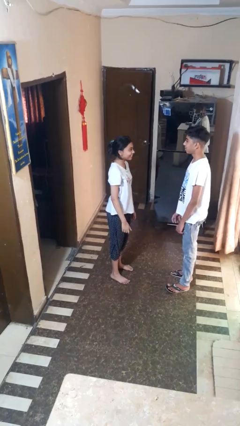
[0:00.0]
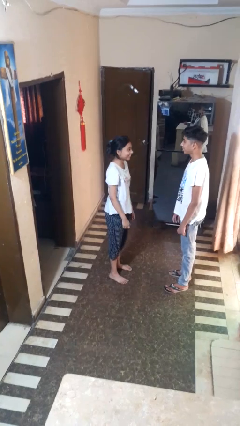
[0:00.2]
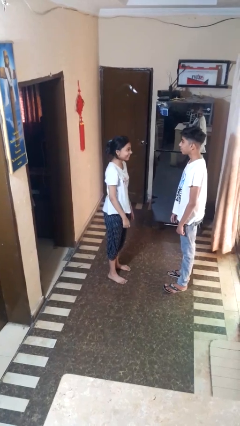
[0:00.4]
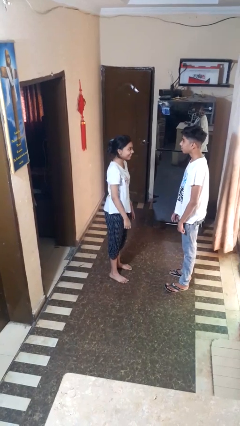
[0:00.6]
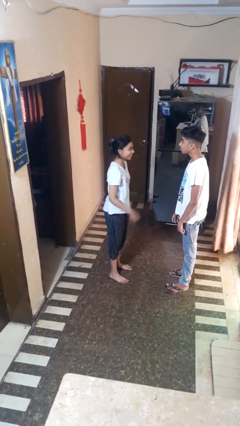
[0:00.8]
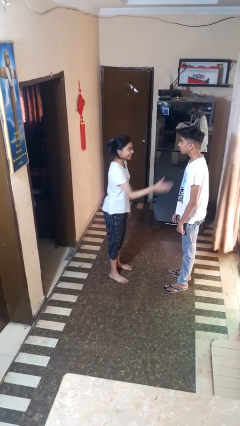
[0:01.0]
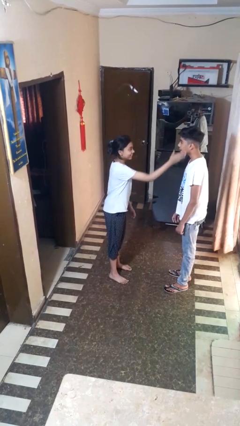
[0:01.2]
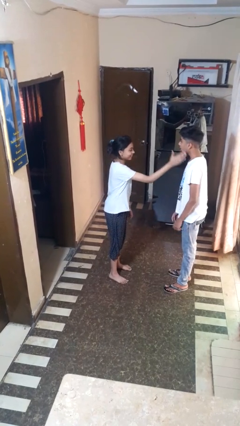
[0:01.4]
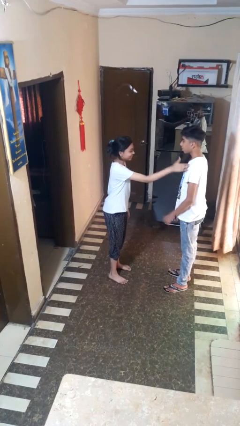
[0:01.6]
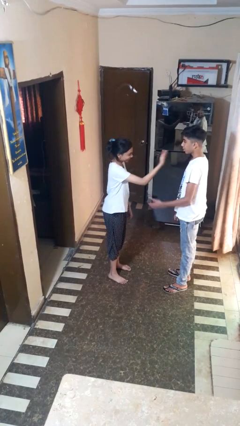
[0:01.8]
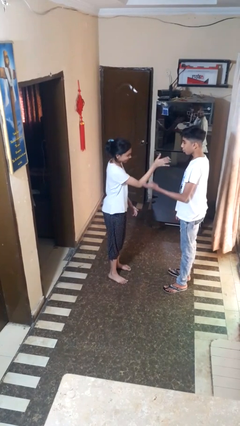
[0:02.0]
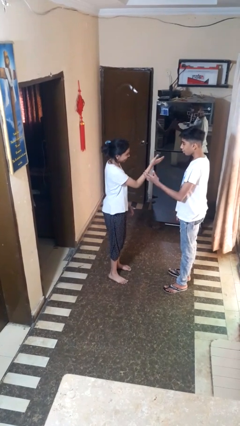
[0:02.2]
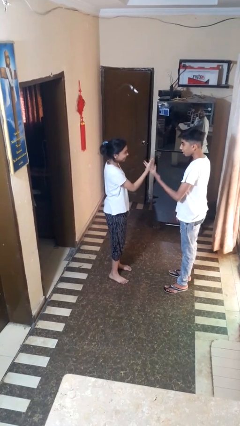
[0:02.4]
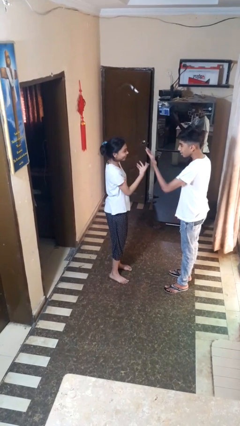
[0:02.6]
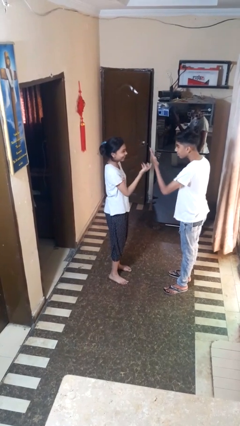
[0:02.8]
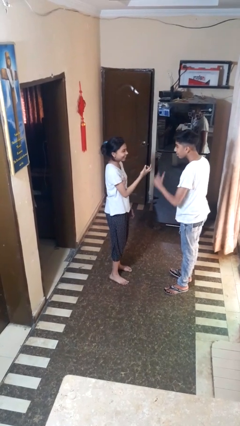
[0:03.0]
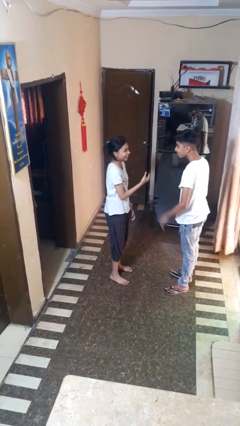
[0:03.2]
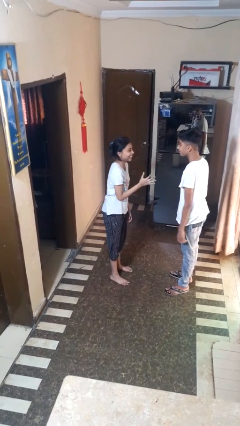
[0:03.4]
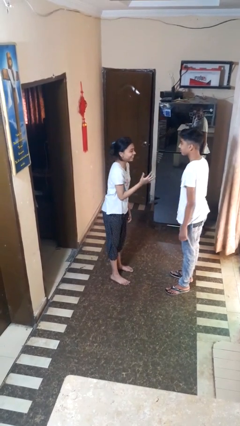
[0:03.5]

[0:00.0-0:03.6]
person shoves person

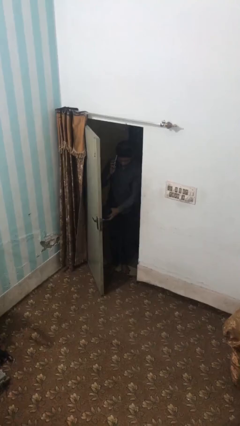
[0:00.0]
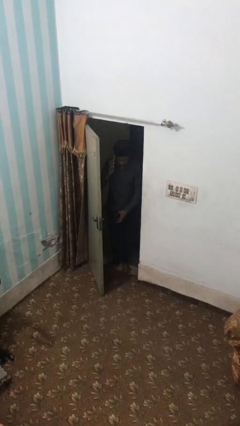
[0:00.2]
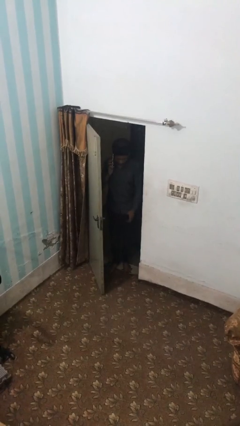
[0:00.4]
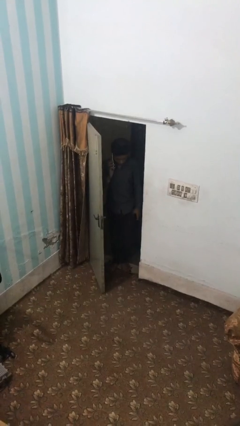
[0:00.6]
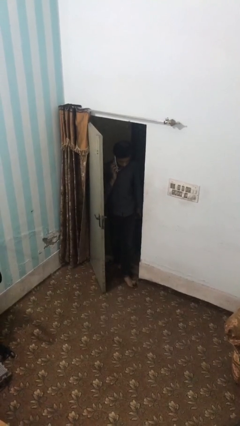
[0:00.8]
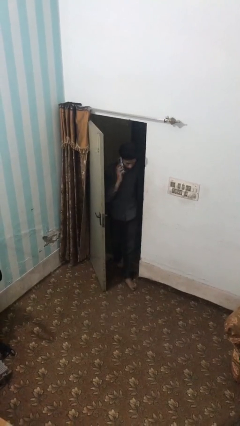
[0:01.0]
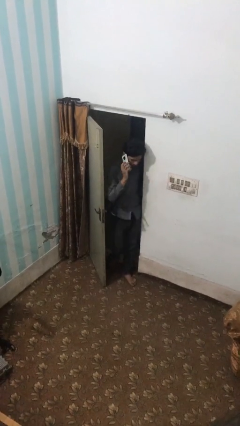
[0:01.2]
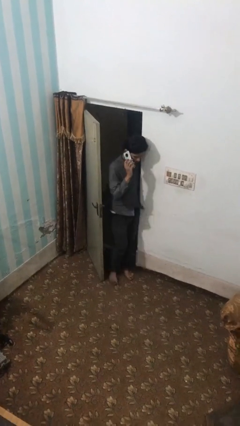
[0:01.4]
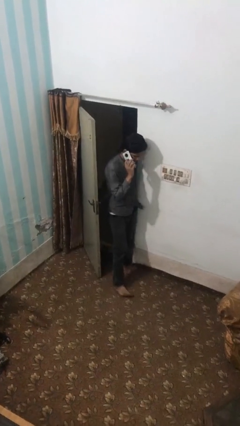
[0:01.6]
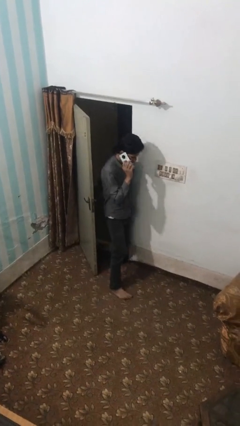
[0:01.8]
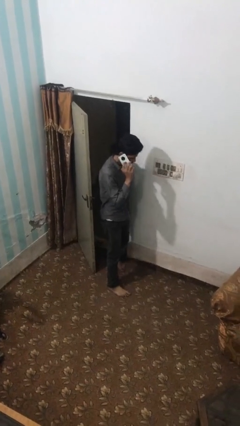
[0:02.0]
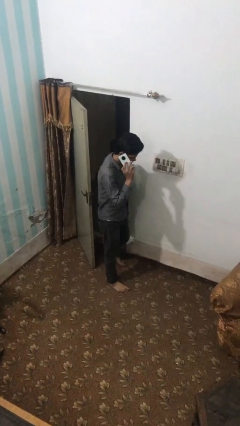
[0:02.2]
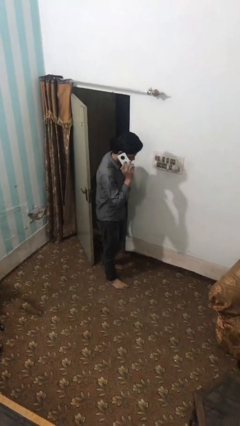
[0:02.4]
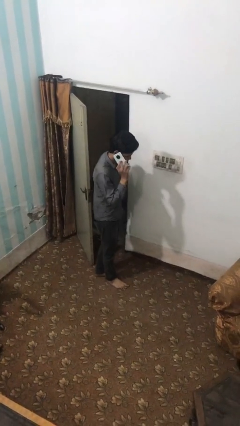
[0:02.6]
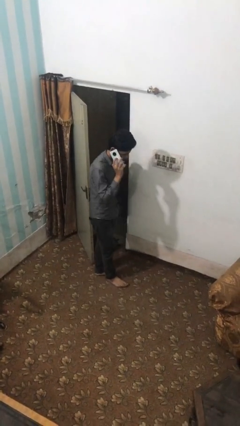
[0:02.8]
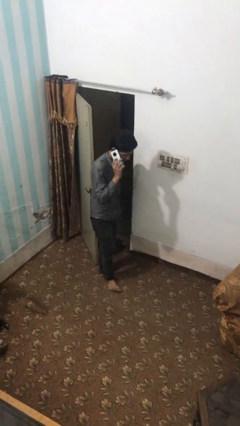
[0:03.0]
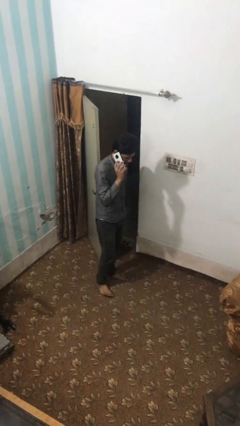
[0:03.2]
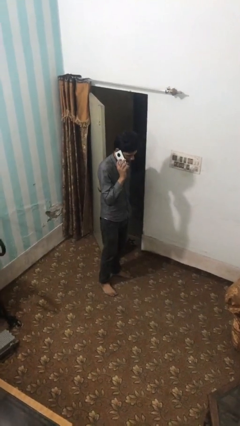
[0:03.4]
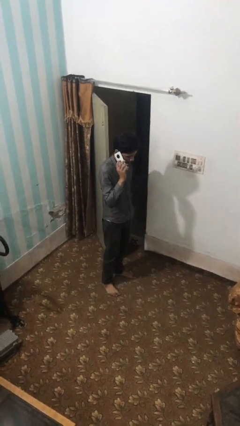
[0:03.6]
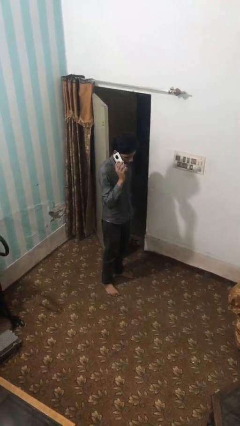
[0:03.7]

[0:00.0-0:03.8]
person enters scene through structure

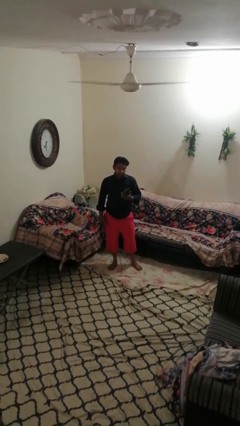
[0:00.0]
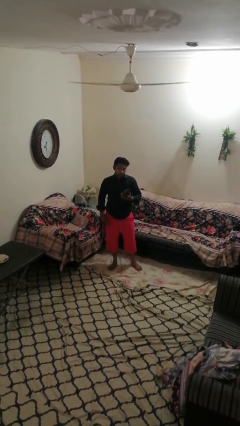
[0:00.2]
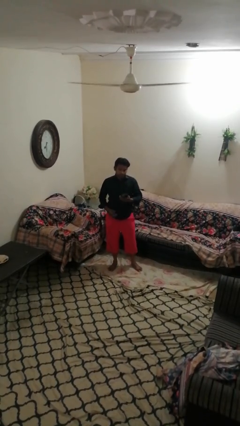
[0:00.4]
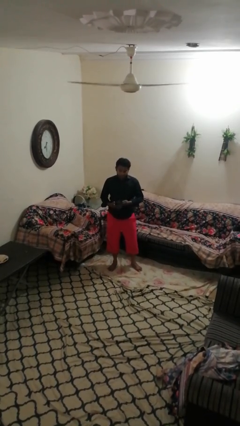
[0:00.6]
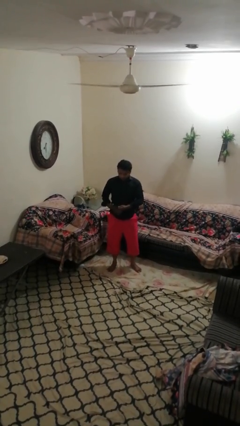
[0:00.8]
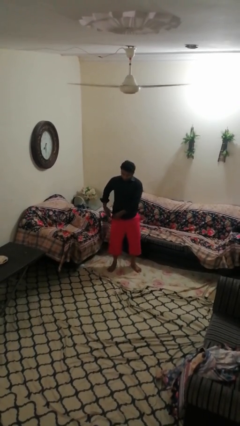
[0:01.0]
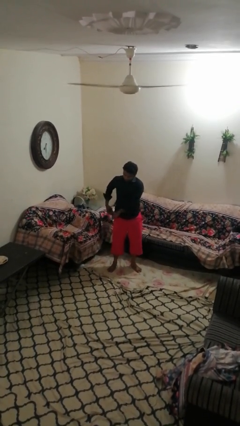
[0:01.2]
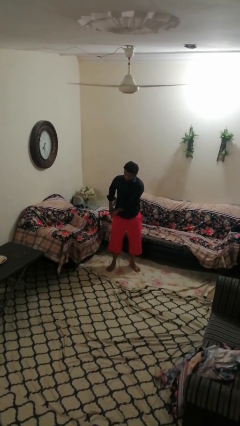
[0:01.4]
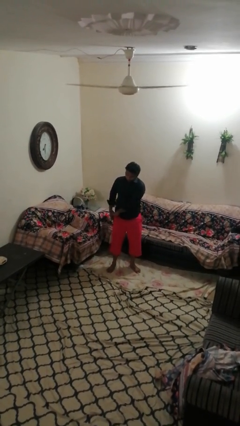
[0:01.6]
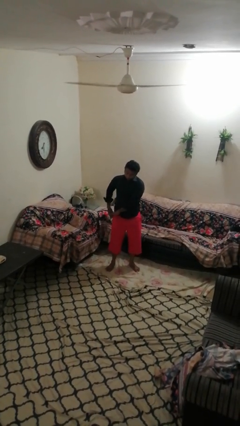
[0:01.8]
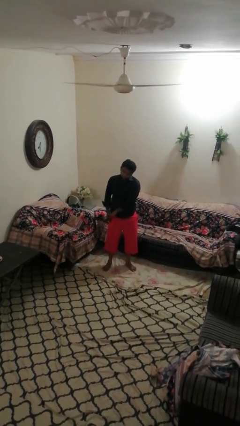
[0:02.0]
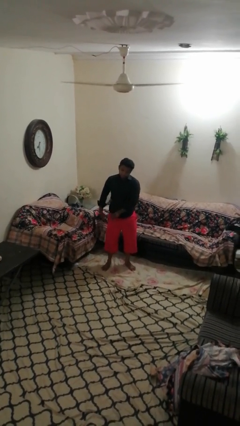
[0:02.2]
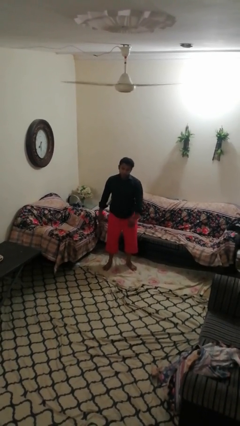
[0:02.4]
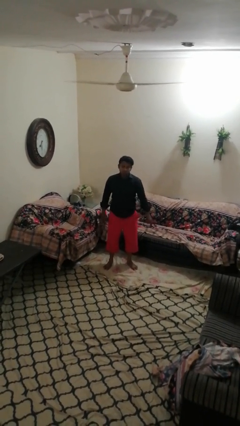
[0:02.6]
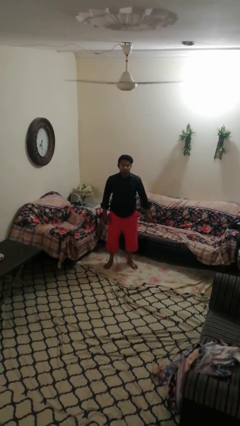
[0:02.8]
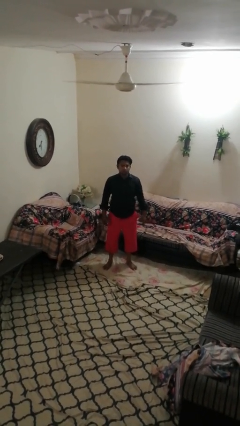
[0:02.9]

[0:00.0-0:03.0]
person puts phone into pocket

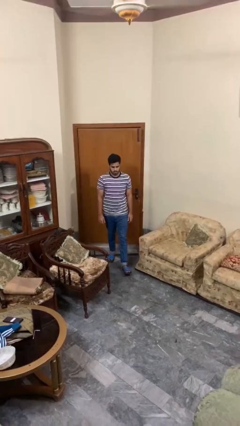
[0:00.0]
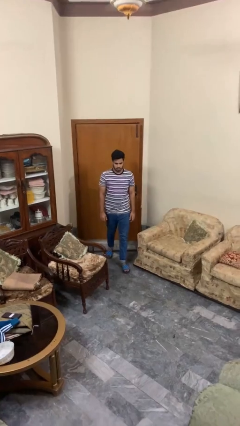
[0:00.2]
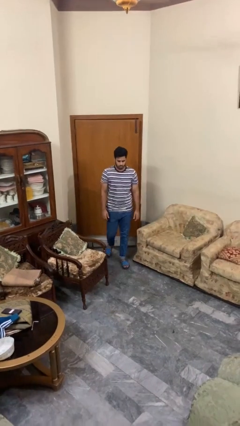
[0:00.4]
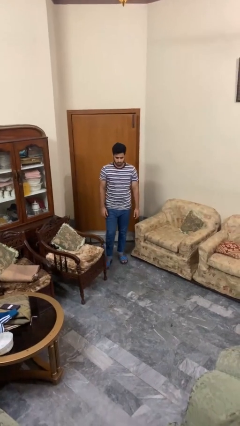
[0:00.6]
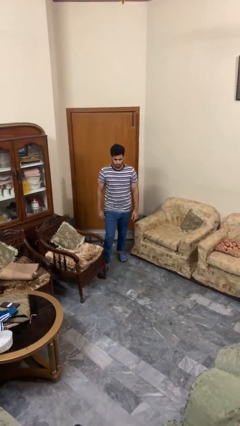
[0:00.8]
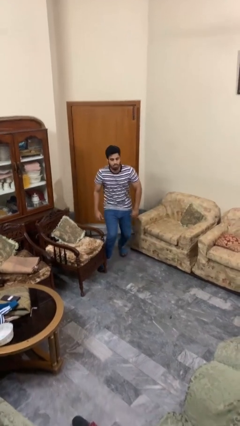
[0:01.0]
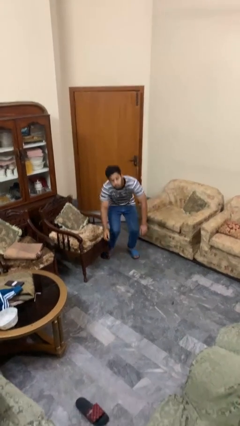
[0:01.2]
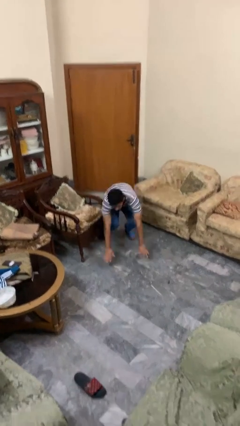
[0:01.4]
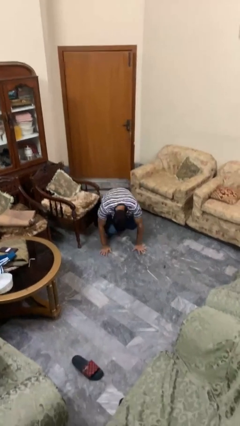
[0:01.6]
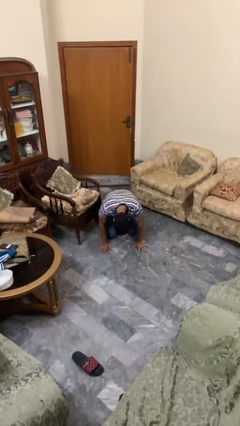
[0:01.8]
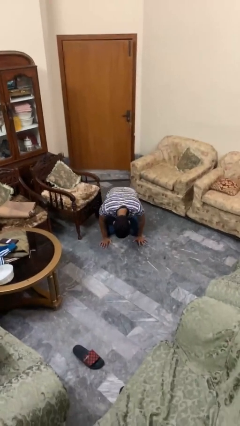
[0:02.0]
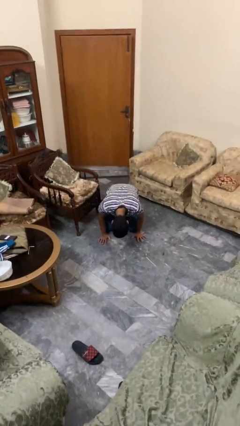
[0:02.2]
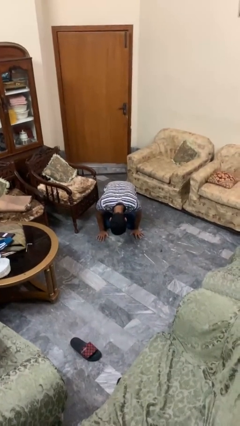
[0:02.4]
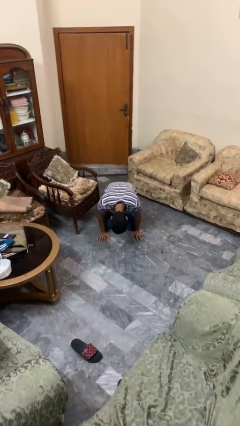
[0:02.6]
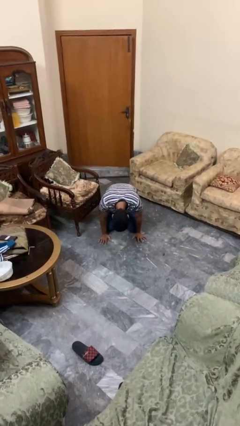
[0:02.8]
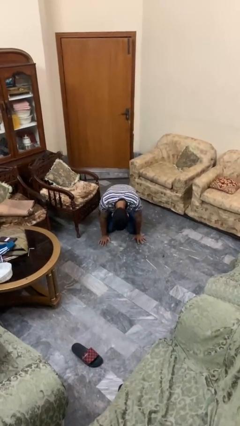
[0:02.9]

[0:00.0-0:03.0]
person trips on object on floor

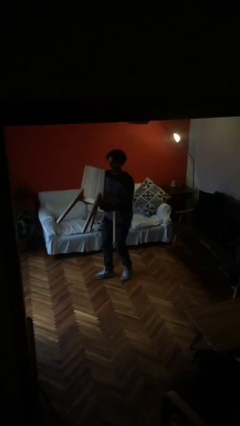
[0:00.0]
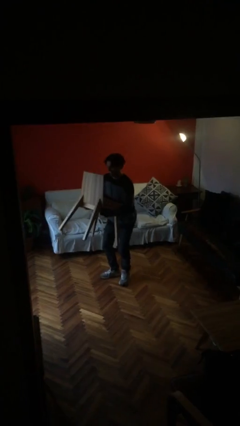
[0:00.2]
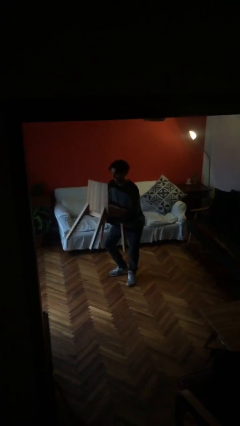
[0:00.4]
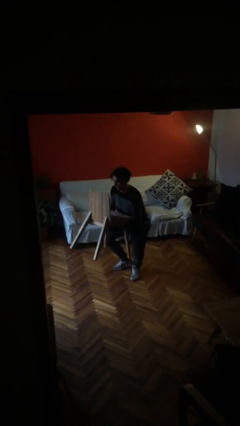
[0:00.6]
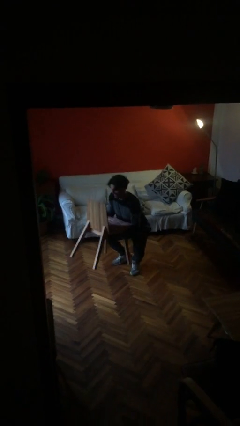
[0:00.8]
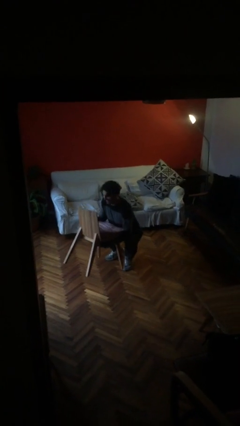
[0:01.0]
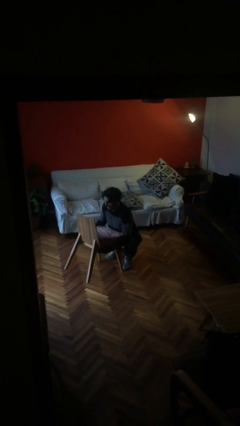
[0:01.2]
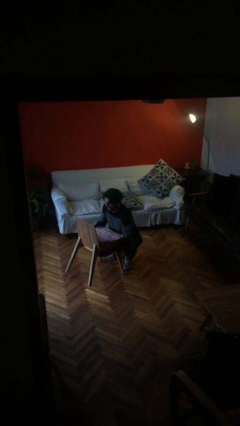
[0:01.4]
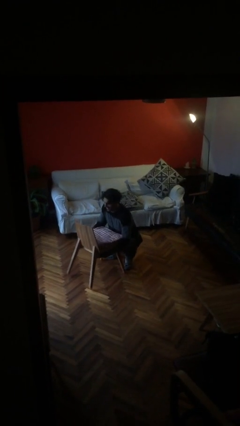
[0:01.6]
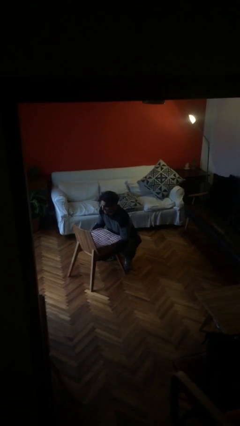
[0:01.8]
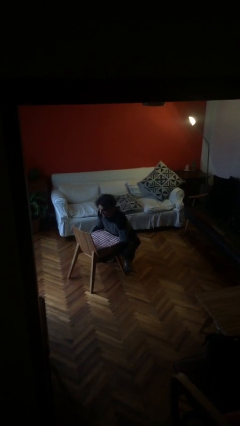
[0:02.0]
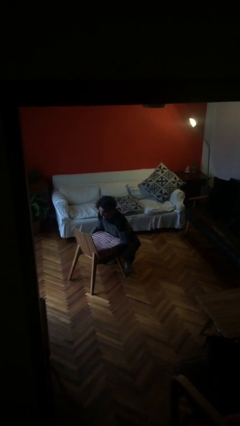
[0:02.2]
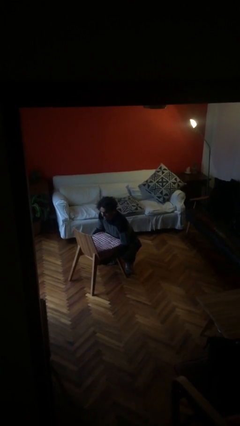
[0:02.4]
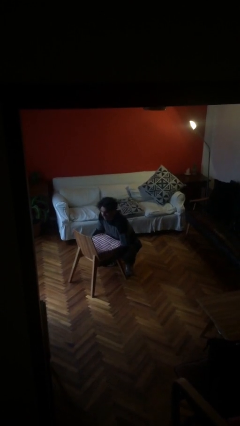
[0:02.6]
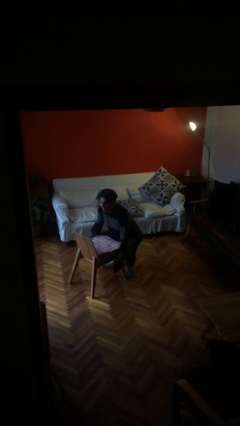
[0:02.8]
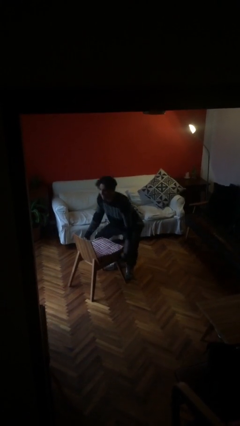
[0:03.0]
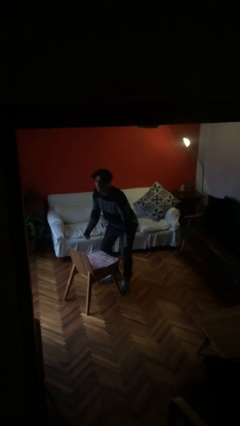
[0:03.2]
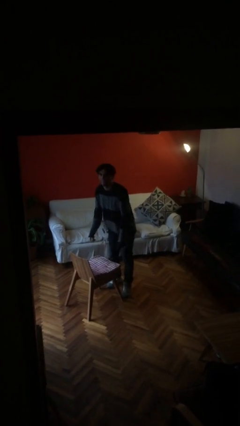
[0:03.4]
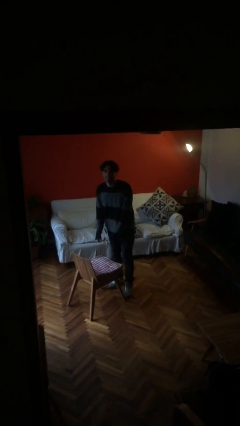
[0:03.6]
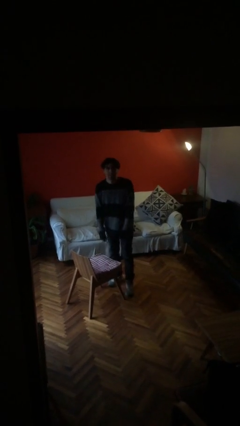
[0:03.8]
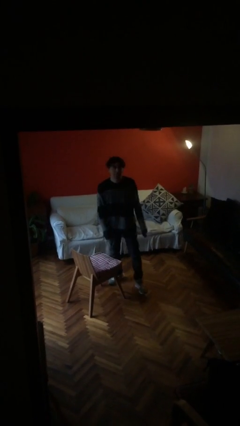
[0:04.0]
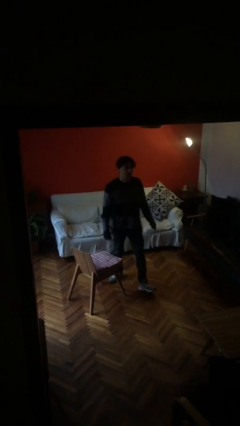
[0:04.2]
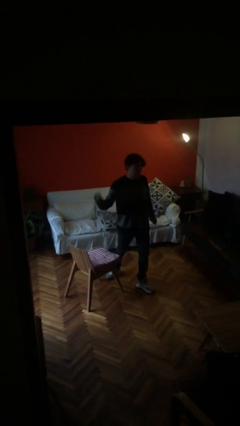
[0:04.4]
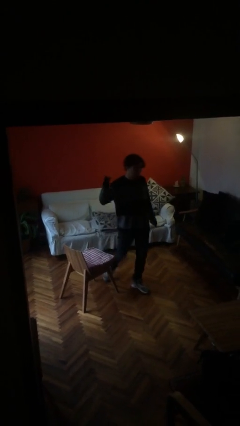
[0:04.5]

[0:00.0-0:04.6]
person puts down object on floor

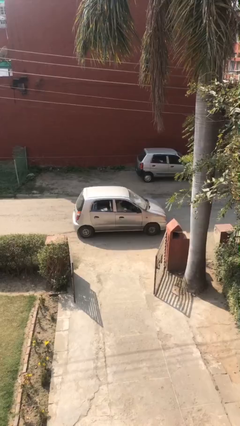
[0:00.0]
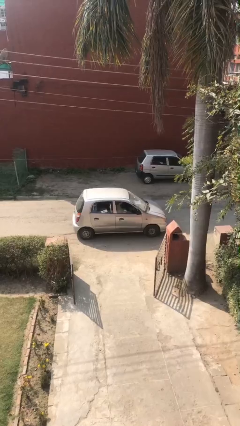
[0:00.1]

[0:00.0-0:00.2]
car drops off person
